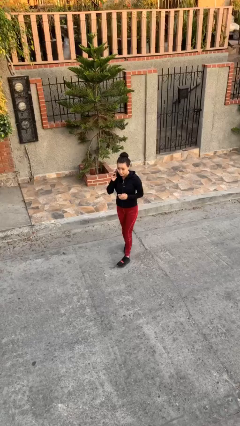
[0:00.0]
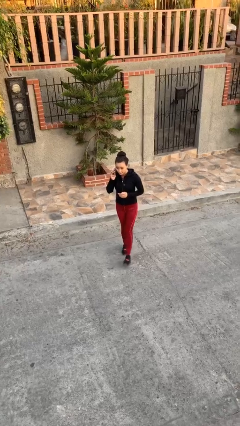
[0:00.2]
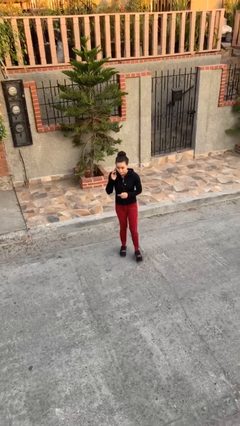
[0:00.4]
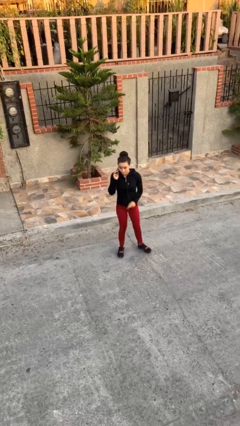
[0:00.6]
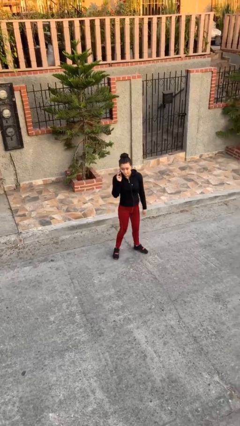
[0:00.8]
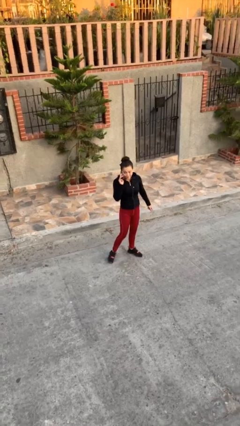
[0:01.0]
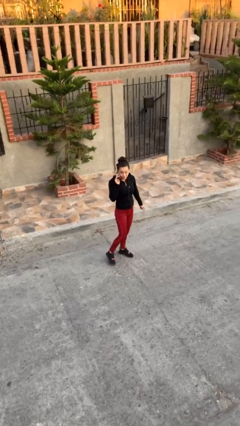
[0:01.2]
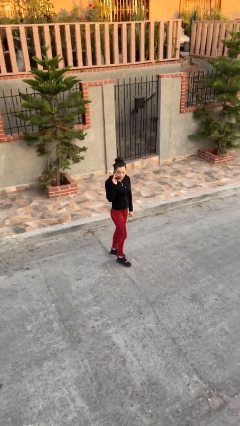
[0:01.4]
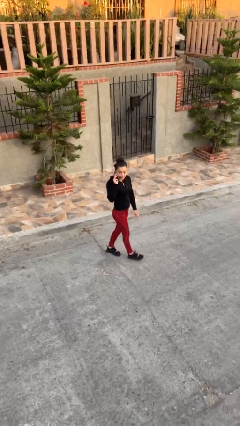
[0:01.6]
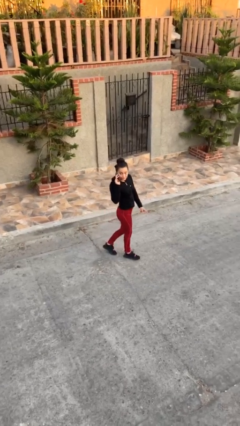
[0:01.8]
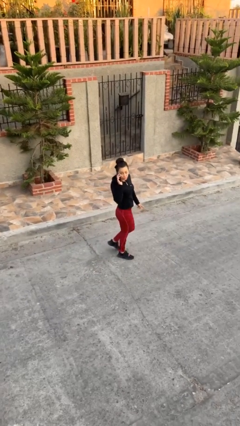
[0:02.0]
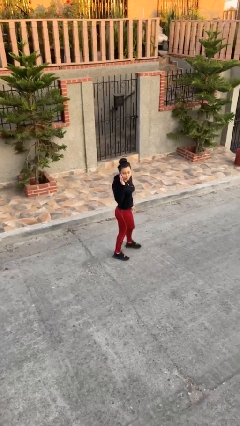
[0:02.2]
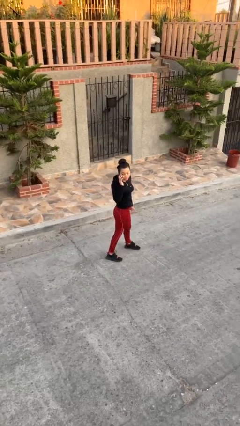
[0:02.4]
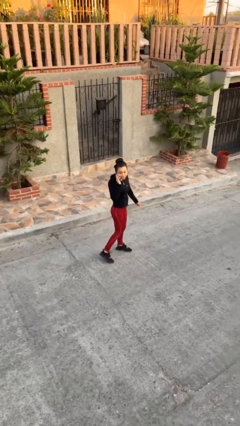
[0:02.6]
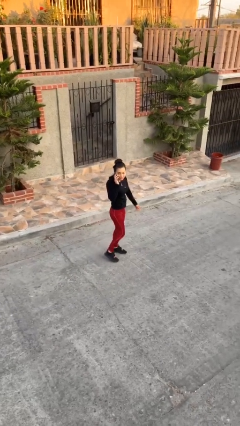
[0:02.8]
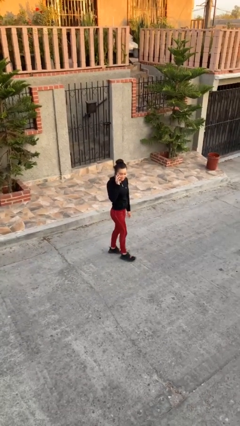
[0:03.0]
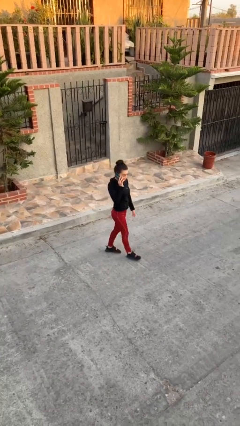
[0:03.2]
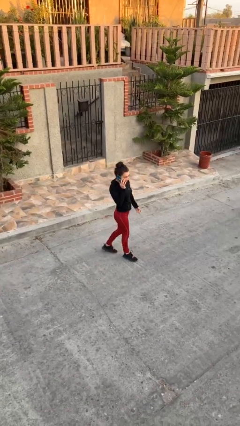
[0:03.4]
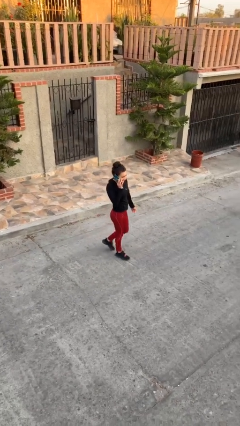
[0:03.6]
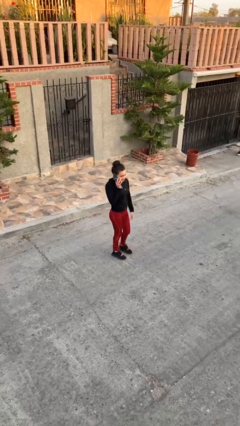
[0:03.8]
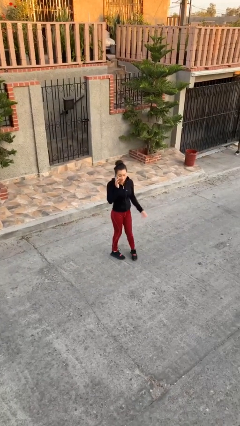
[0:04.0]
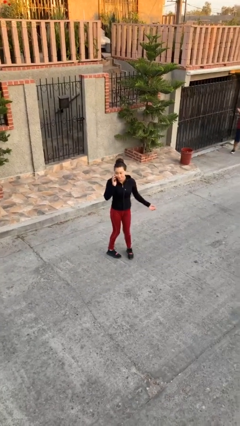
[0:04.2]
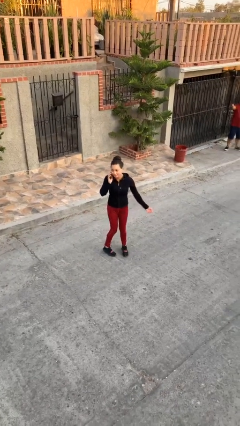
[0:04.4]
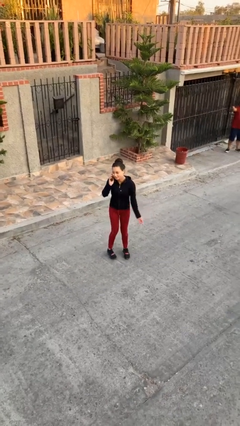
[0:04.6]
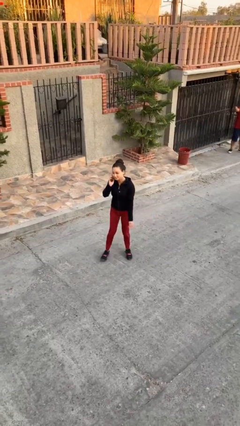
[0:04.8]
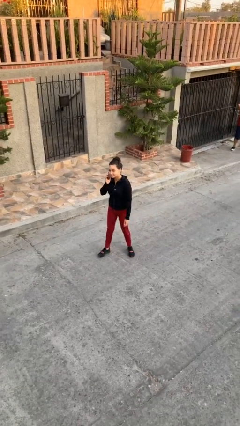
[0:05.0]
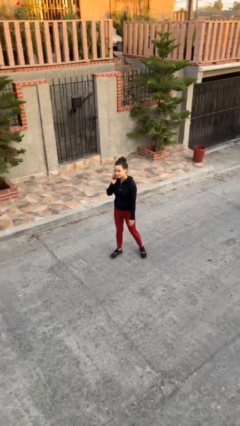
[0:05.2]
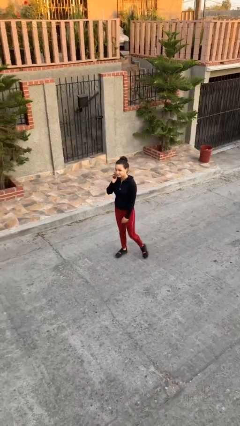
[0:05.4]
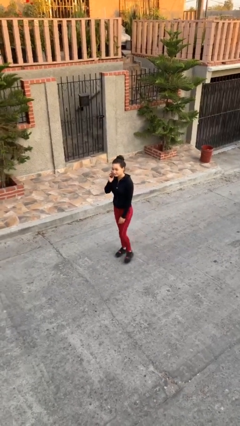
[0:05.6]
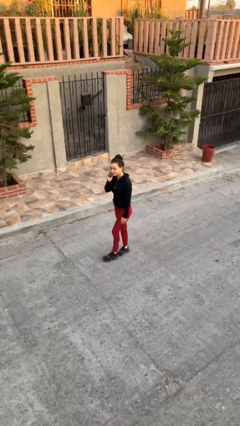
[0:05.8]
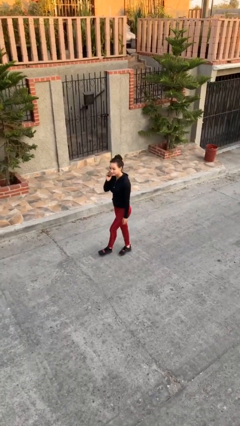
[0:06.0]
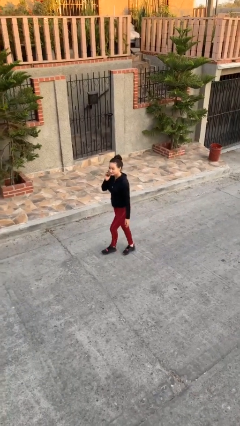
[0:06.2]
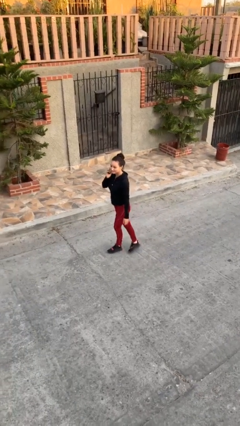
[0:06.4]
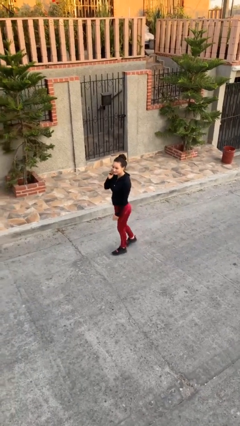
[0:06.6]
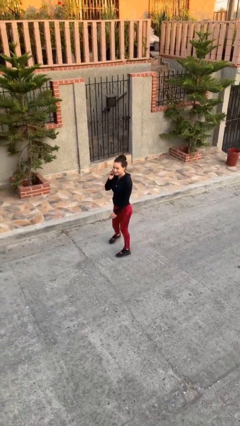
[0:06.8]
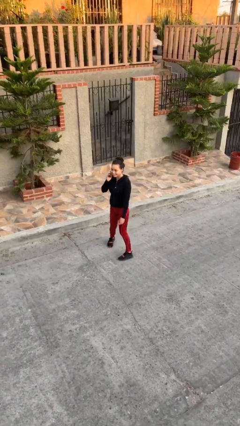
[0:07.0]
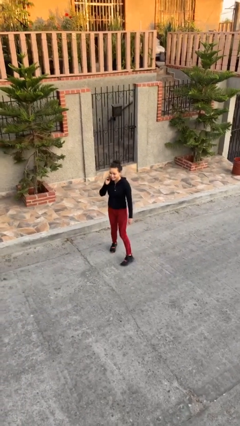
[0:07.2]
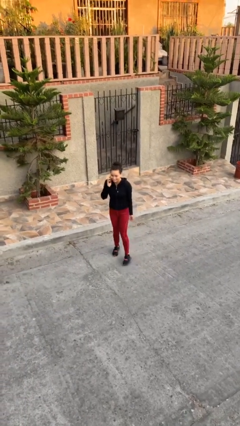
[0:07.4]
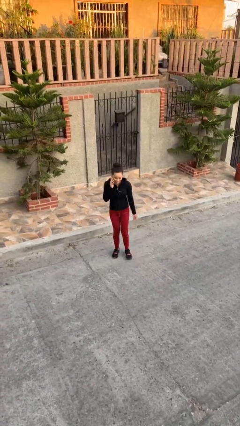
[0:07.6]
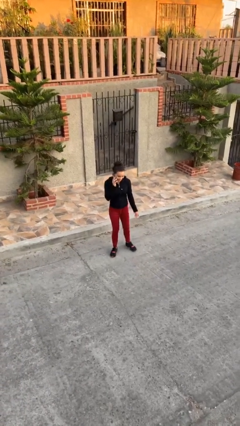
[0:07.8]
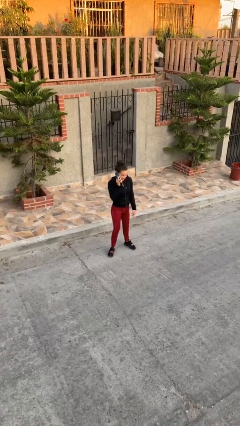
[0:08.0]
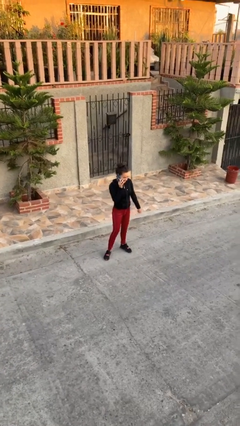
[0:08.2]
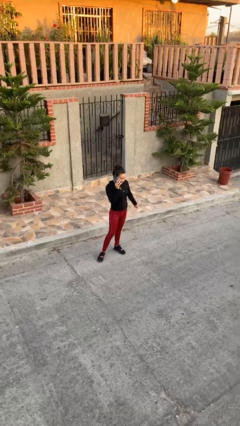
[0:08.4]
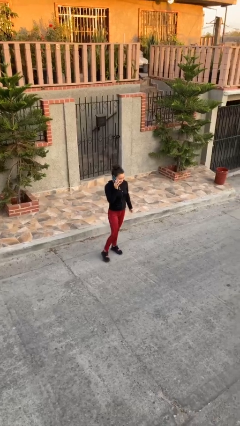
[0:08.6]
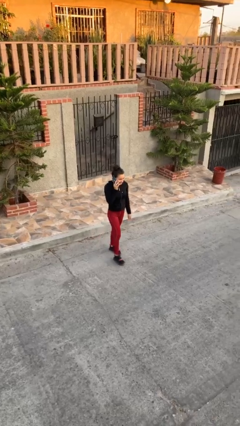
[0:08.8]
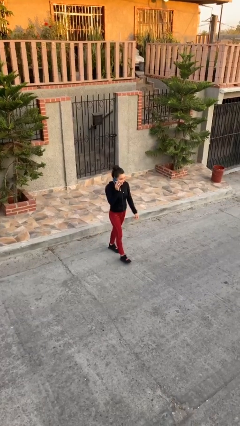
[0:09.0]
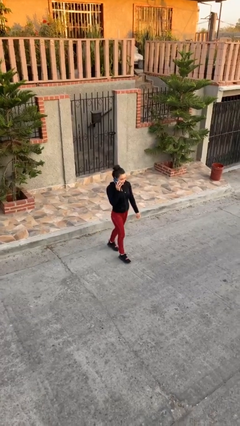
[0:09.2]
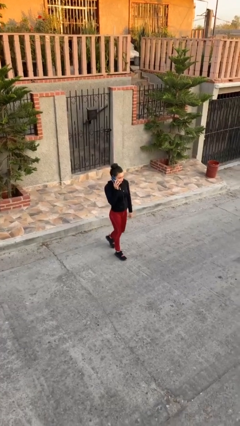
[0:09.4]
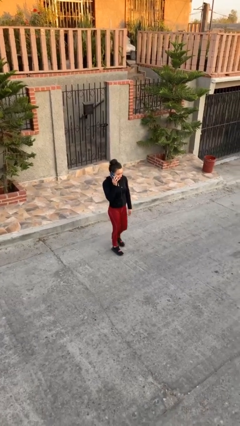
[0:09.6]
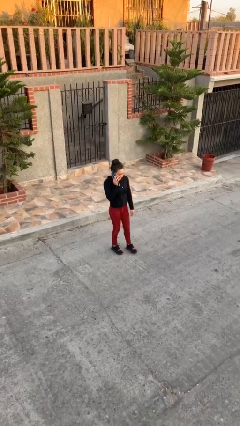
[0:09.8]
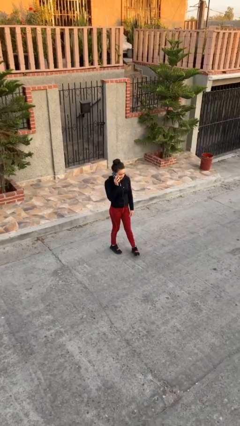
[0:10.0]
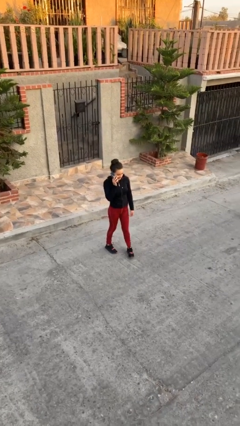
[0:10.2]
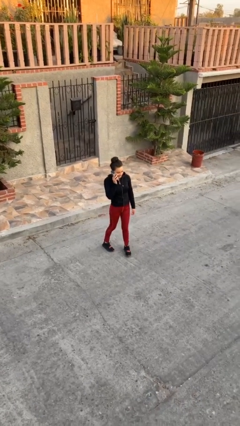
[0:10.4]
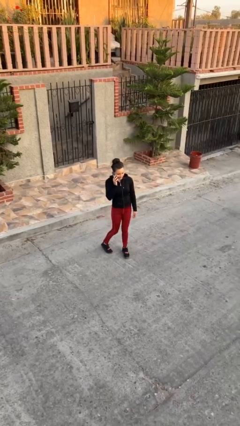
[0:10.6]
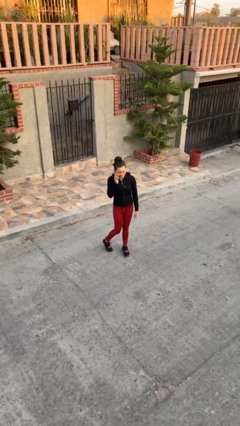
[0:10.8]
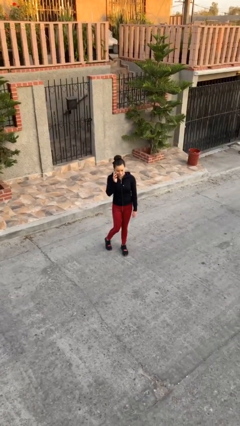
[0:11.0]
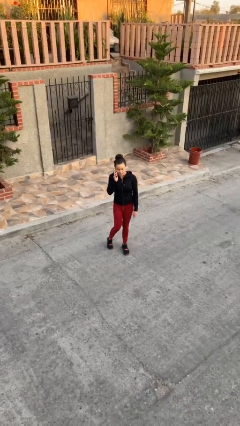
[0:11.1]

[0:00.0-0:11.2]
person talks on phone

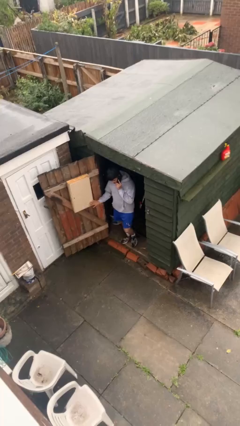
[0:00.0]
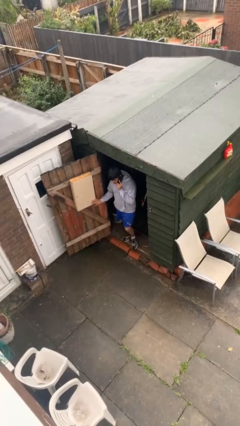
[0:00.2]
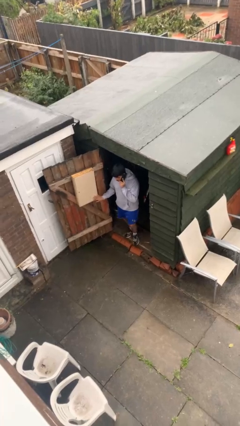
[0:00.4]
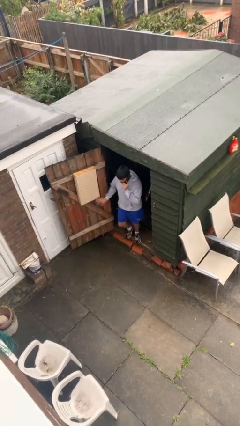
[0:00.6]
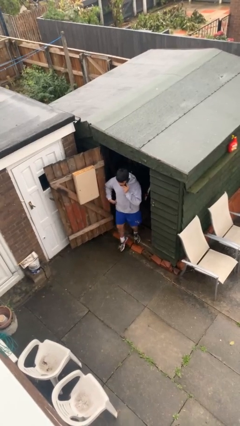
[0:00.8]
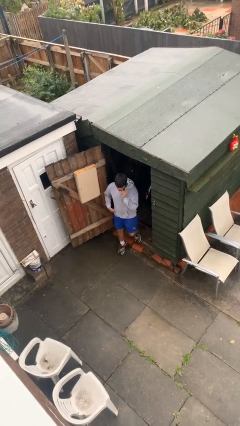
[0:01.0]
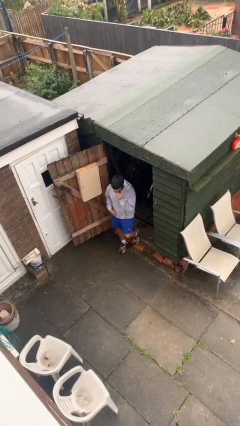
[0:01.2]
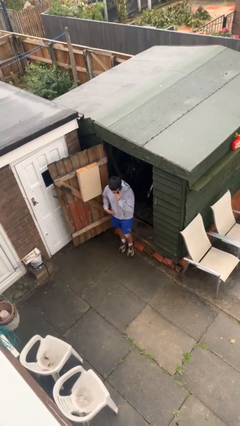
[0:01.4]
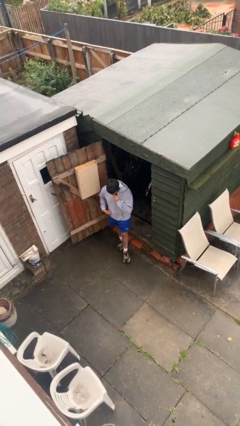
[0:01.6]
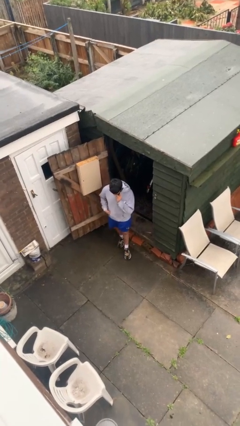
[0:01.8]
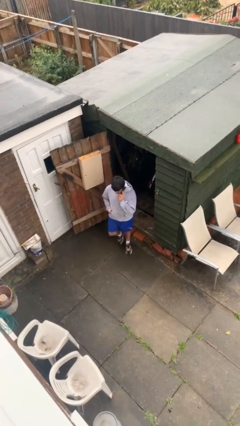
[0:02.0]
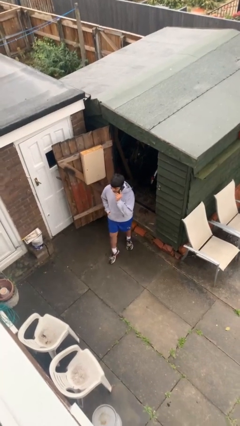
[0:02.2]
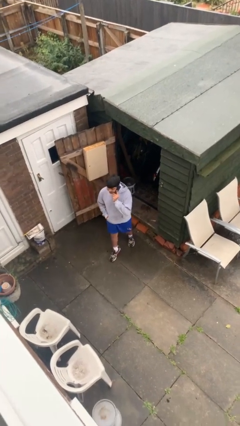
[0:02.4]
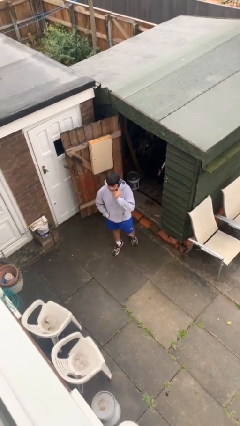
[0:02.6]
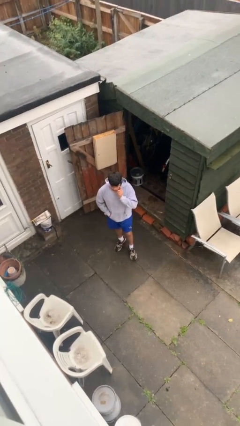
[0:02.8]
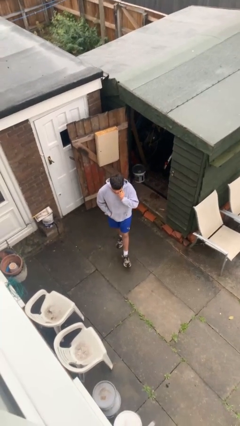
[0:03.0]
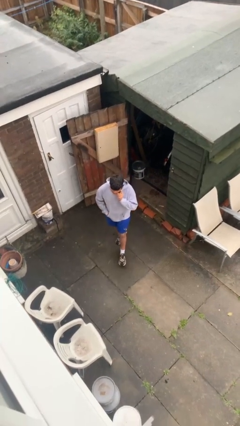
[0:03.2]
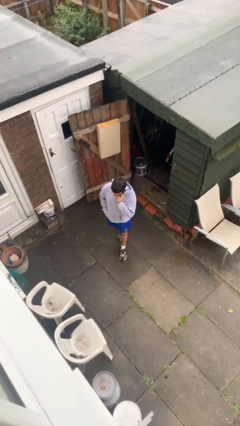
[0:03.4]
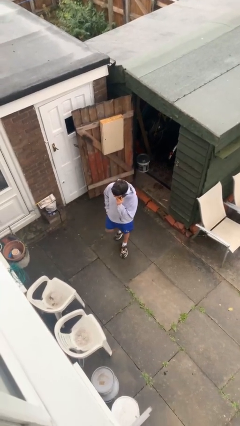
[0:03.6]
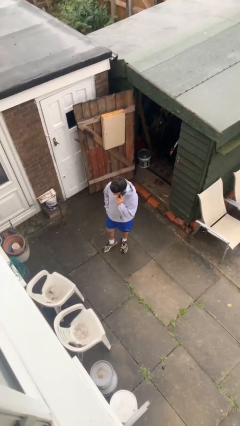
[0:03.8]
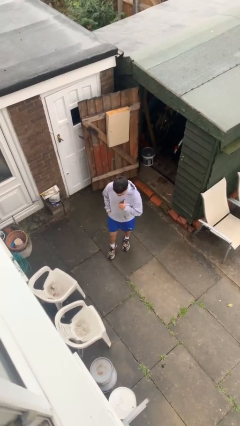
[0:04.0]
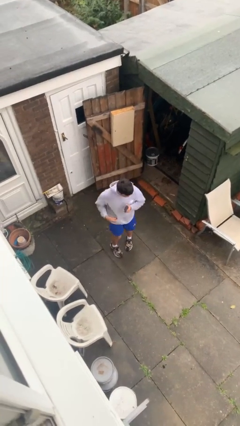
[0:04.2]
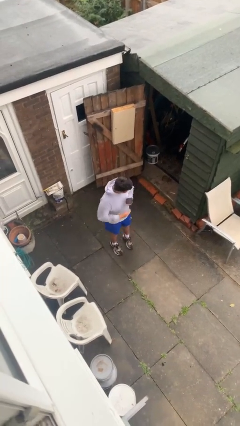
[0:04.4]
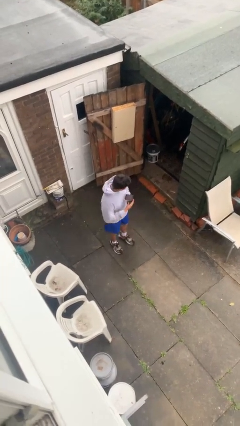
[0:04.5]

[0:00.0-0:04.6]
person enters scene through structure

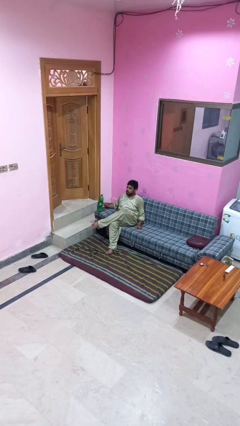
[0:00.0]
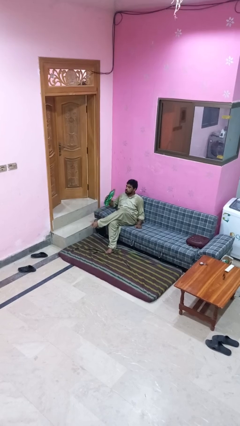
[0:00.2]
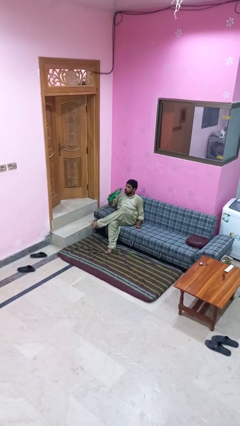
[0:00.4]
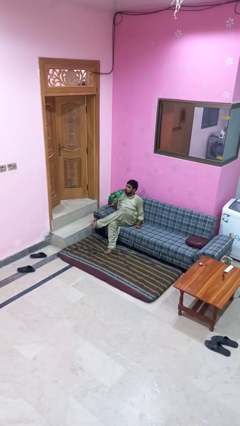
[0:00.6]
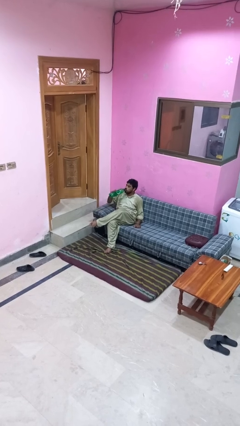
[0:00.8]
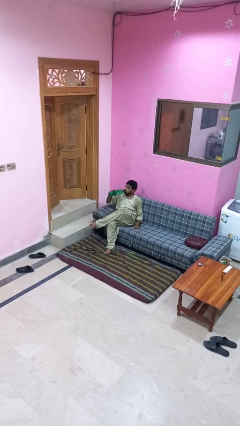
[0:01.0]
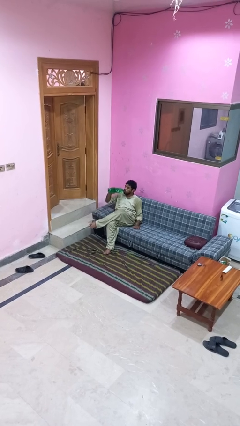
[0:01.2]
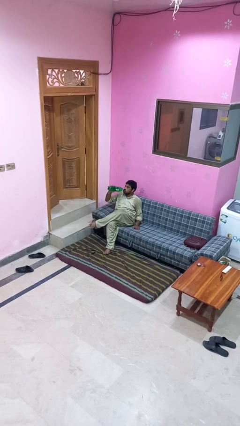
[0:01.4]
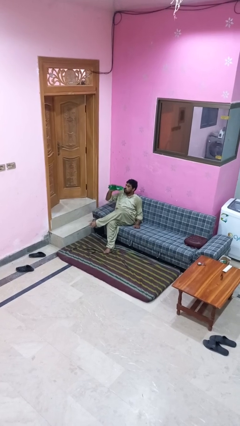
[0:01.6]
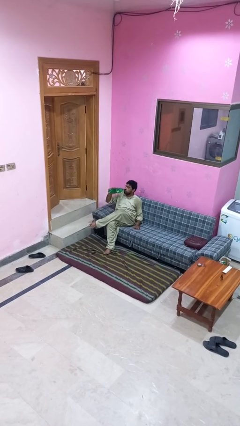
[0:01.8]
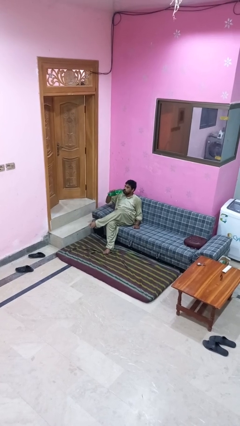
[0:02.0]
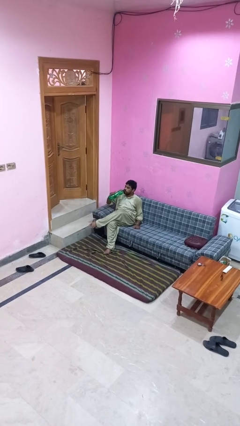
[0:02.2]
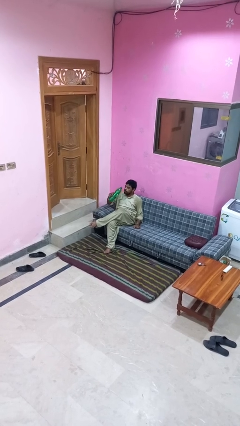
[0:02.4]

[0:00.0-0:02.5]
person drinks from bottle
